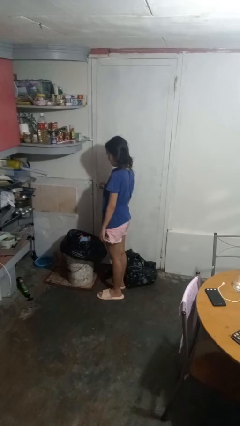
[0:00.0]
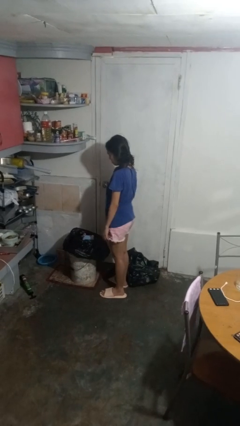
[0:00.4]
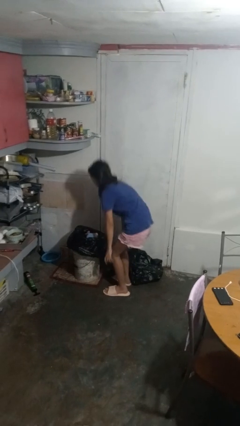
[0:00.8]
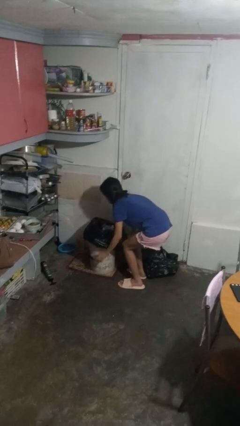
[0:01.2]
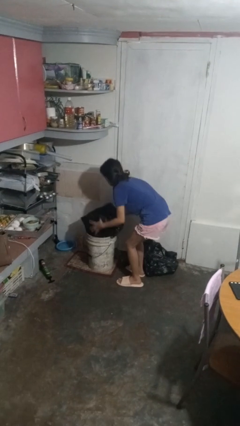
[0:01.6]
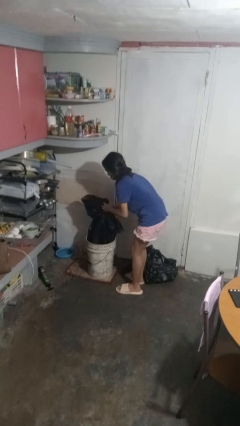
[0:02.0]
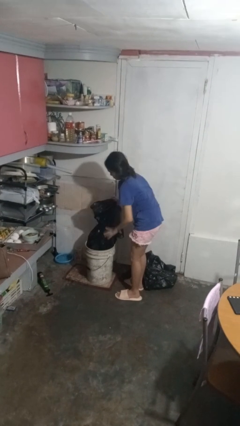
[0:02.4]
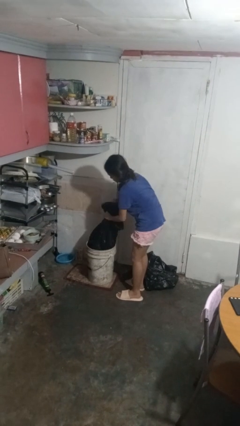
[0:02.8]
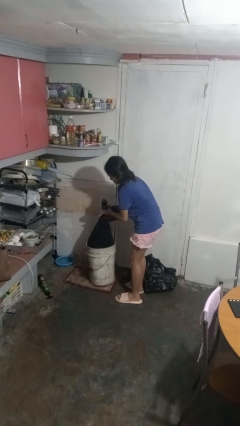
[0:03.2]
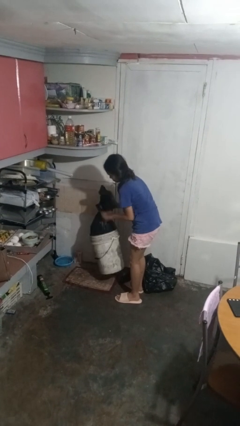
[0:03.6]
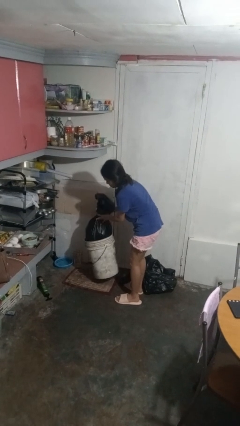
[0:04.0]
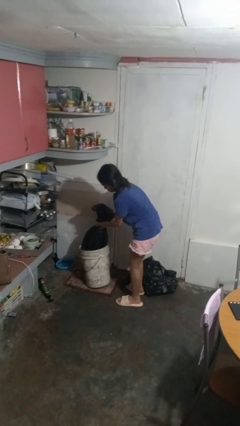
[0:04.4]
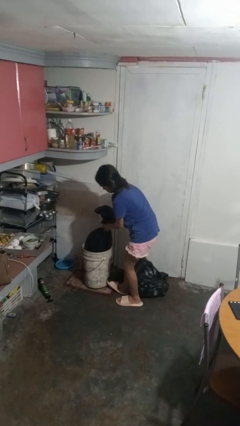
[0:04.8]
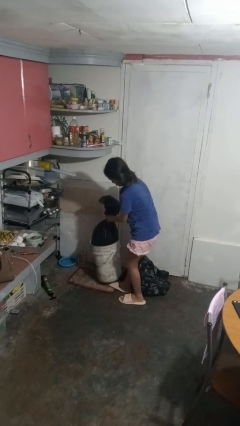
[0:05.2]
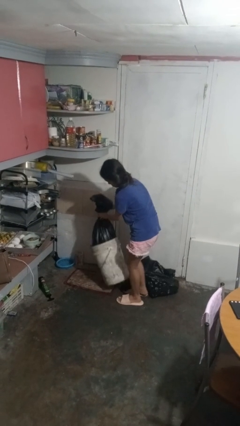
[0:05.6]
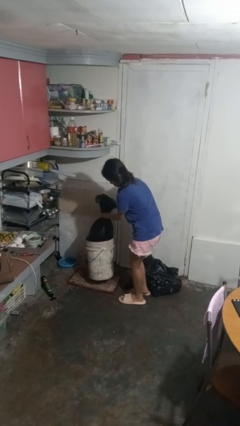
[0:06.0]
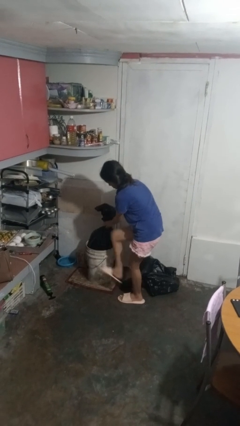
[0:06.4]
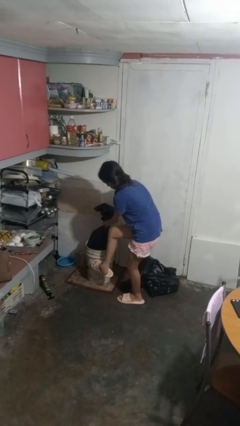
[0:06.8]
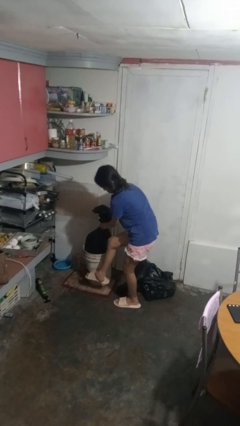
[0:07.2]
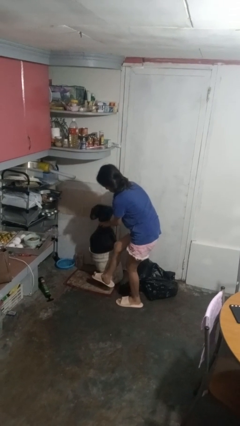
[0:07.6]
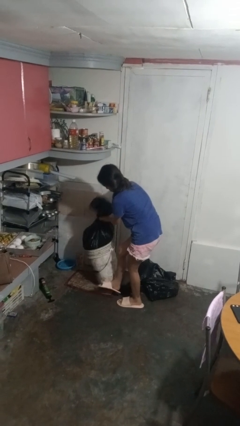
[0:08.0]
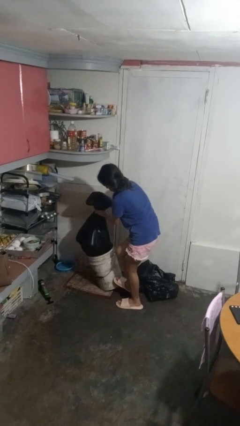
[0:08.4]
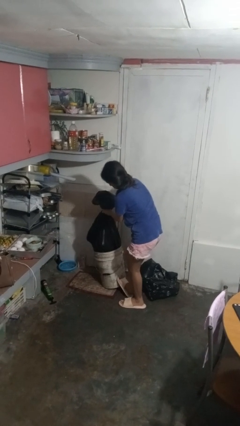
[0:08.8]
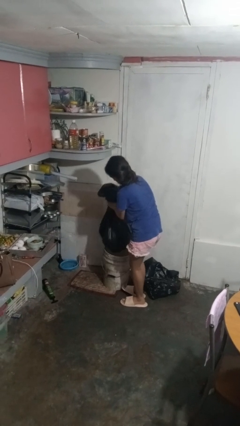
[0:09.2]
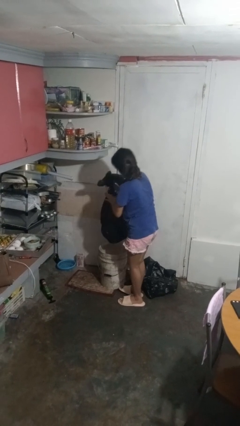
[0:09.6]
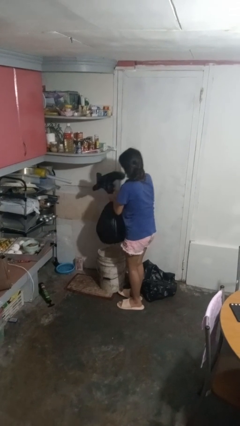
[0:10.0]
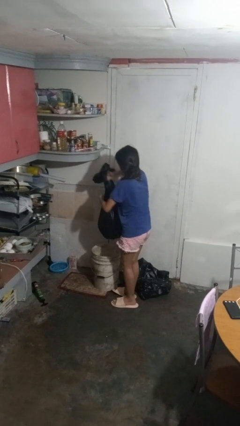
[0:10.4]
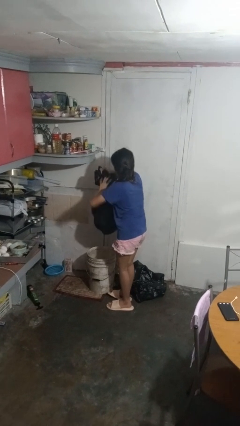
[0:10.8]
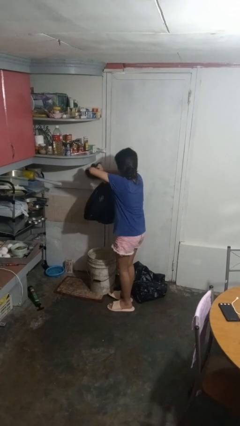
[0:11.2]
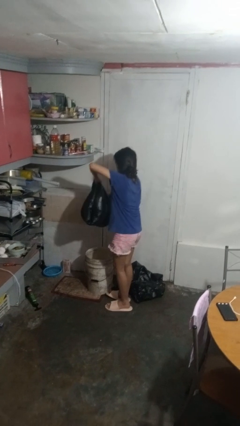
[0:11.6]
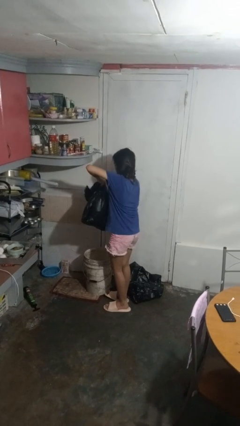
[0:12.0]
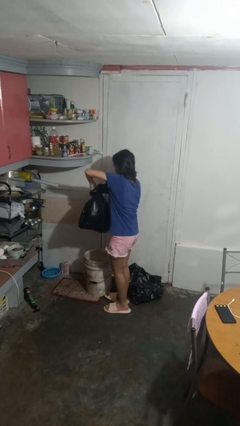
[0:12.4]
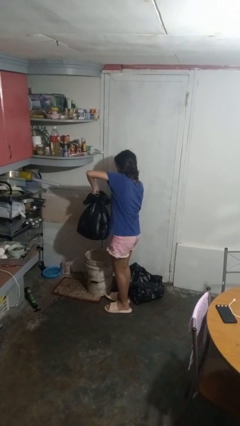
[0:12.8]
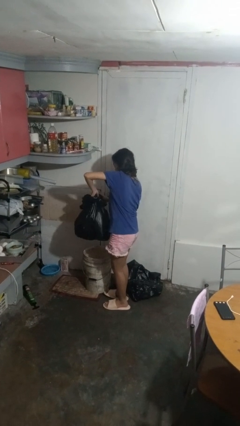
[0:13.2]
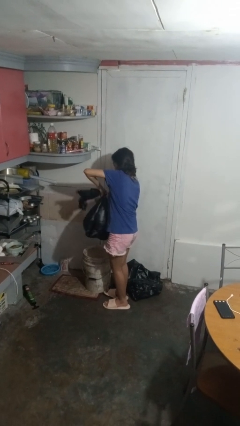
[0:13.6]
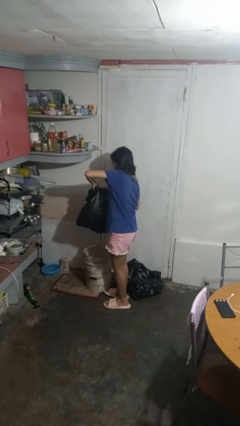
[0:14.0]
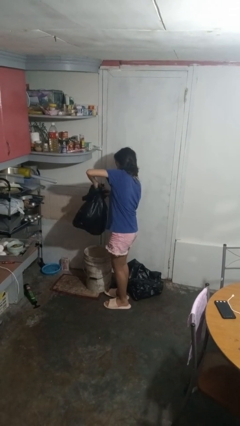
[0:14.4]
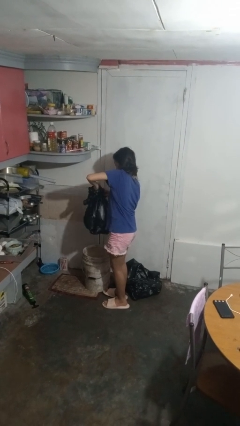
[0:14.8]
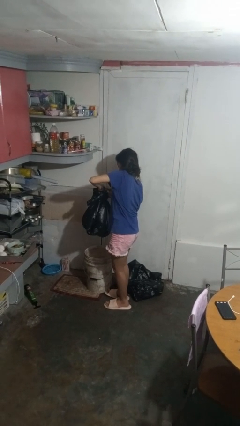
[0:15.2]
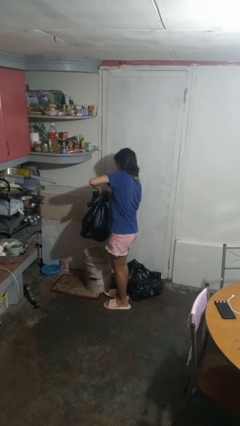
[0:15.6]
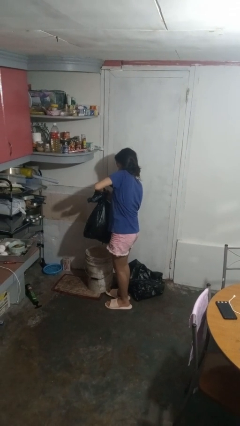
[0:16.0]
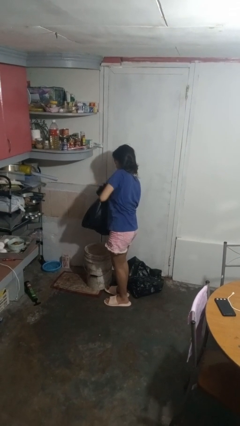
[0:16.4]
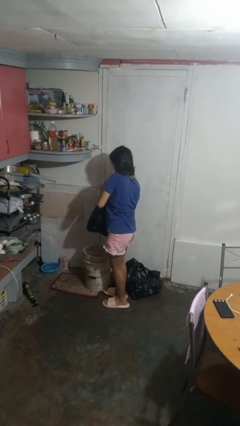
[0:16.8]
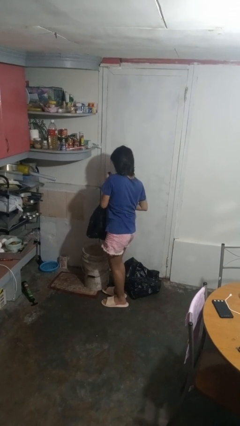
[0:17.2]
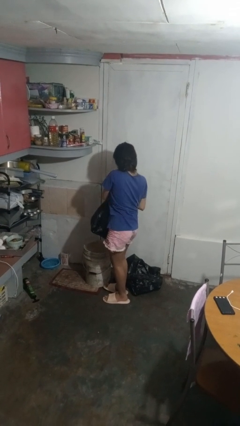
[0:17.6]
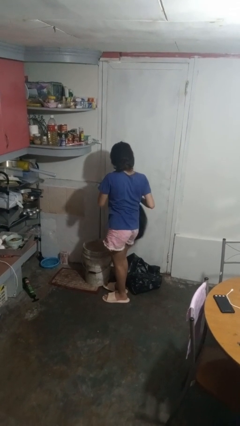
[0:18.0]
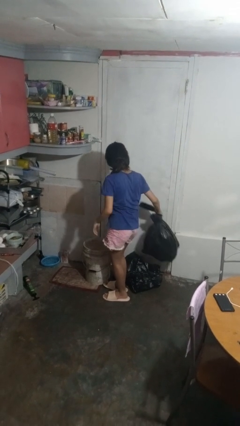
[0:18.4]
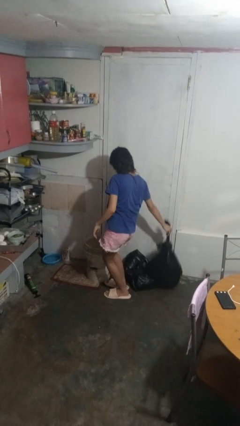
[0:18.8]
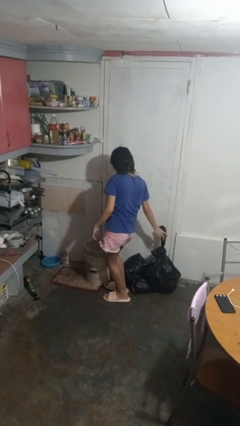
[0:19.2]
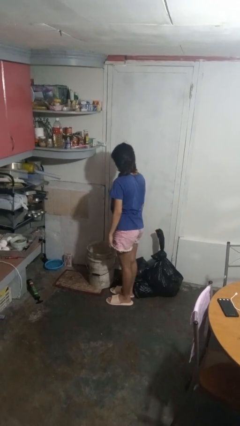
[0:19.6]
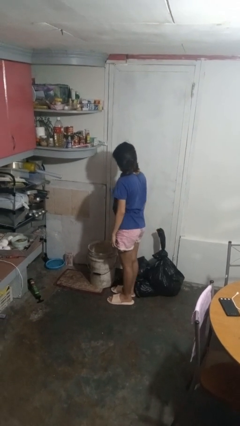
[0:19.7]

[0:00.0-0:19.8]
person removes trashbag from trashcan

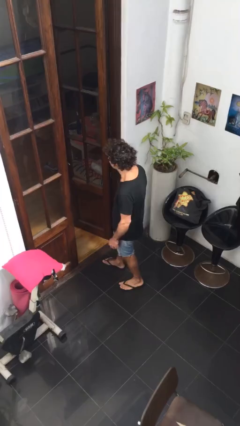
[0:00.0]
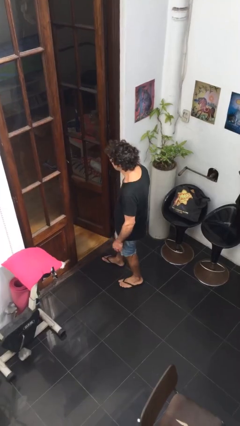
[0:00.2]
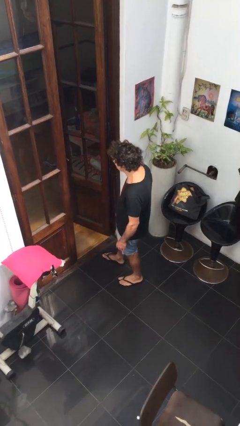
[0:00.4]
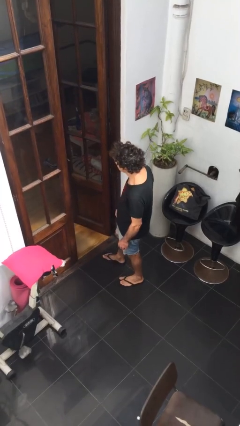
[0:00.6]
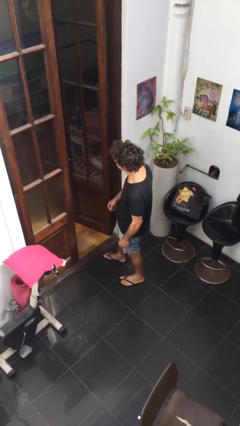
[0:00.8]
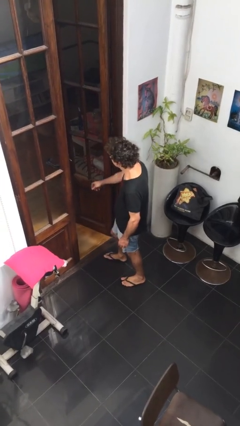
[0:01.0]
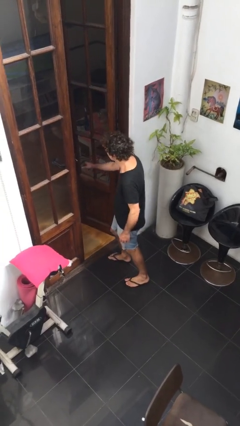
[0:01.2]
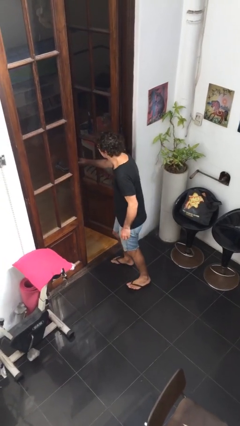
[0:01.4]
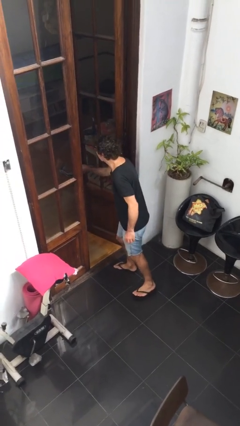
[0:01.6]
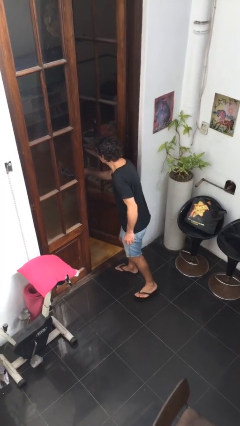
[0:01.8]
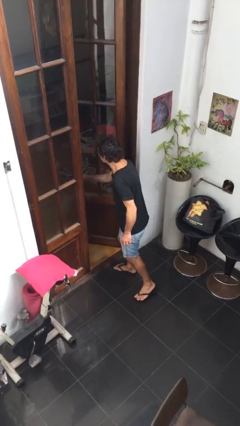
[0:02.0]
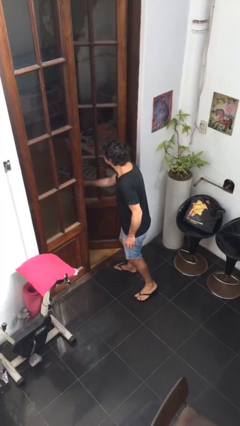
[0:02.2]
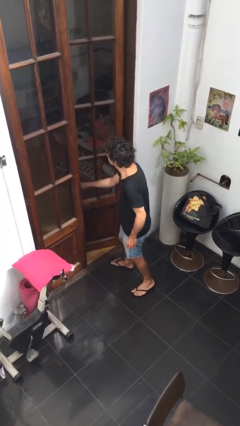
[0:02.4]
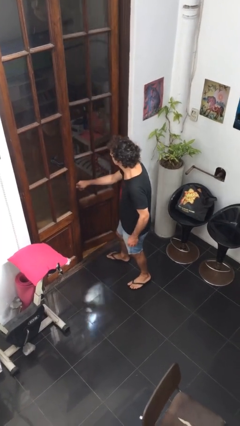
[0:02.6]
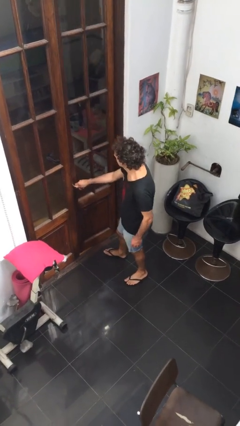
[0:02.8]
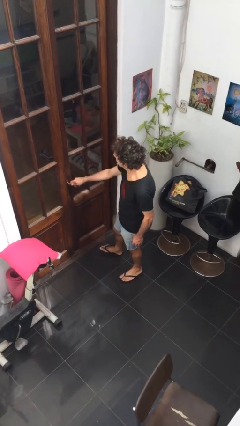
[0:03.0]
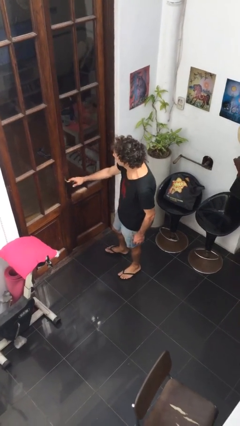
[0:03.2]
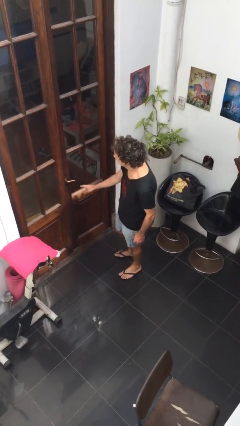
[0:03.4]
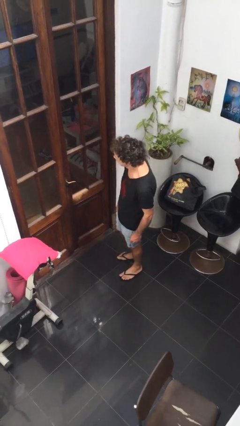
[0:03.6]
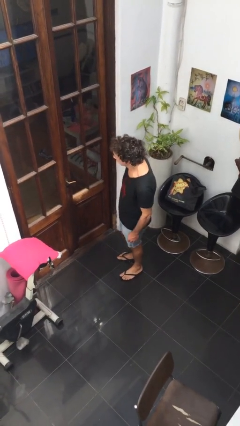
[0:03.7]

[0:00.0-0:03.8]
person closes facility door

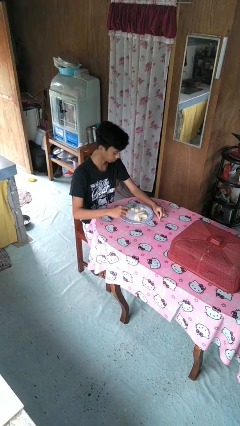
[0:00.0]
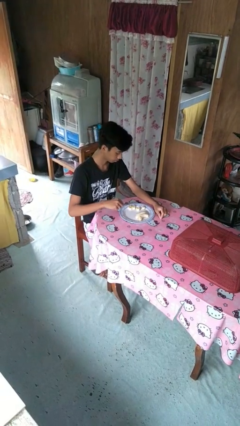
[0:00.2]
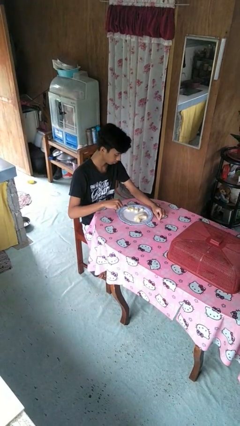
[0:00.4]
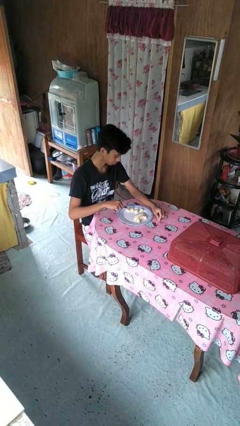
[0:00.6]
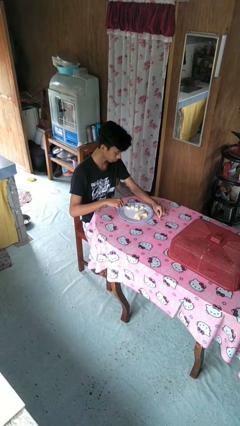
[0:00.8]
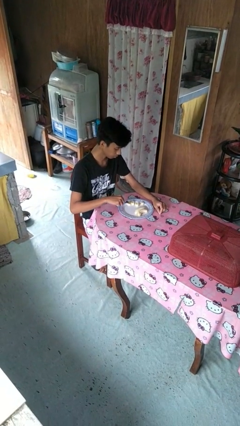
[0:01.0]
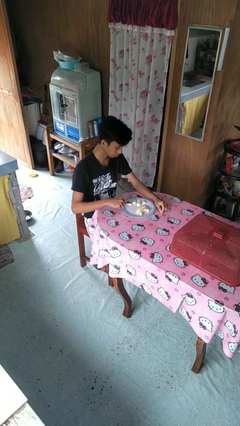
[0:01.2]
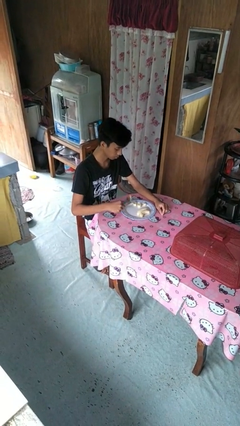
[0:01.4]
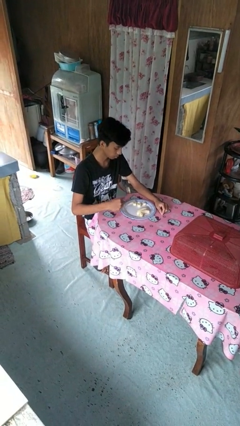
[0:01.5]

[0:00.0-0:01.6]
person eats with utensil

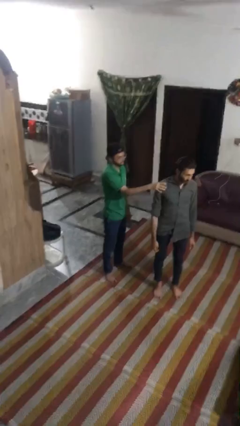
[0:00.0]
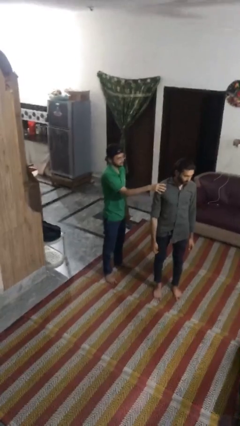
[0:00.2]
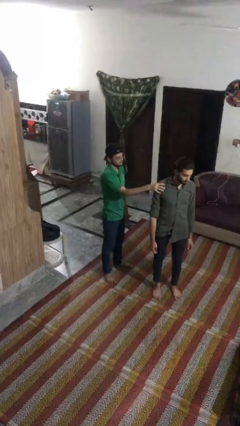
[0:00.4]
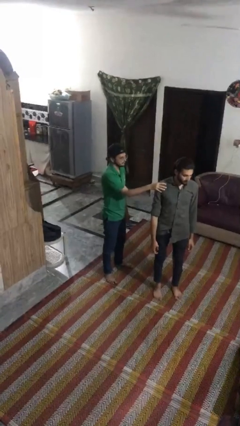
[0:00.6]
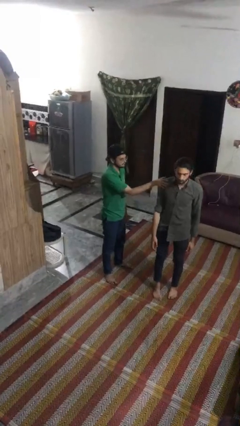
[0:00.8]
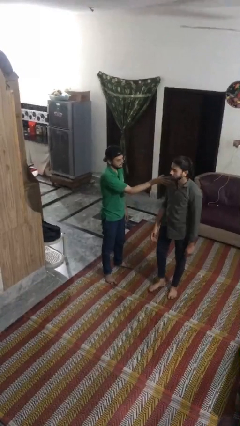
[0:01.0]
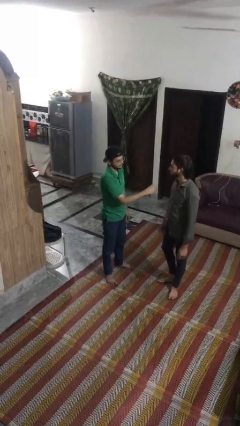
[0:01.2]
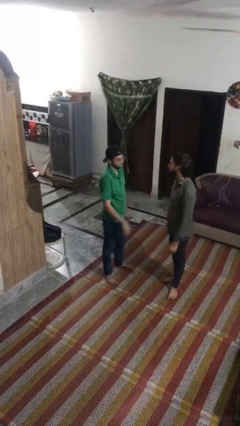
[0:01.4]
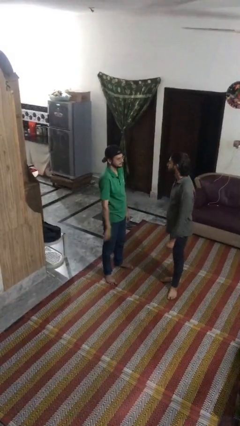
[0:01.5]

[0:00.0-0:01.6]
person spins person around

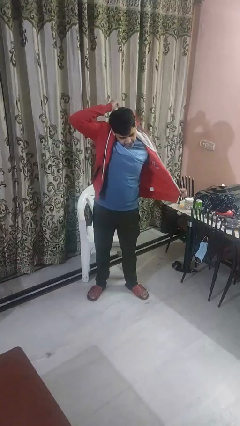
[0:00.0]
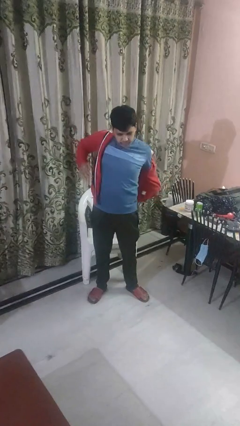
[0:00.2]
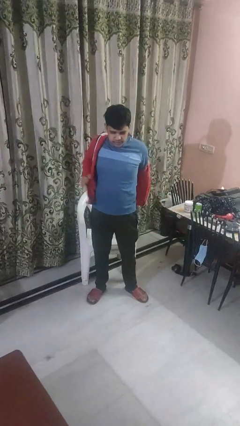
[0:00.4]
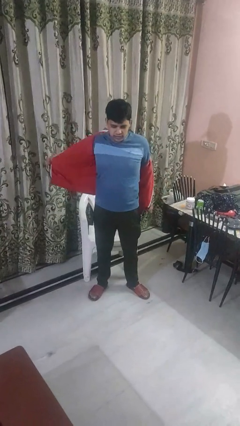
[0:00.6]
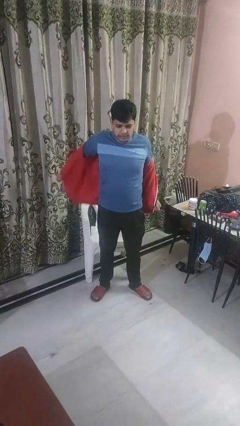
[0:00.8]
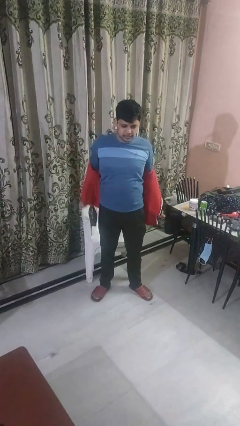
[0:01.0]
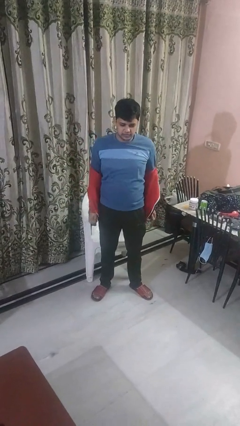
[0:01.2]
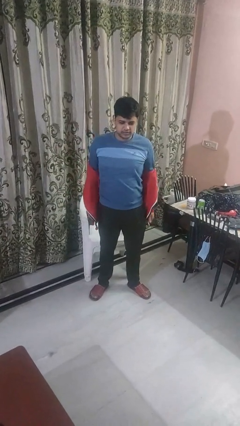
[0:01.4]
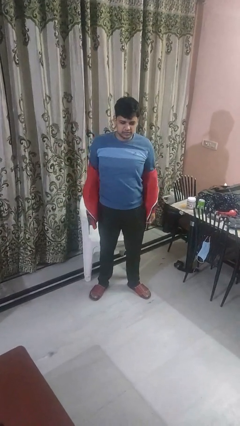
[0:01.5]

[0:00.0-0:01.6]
person takes off hoodie
